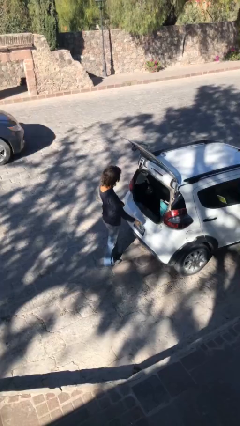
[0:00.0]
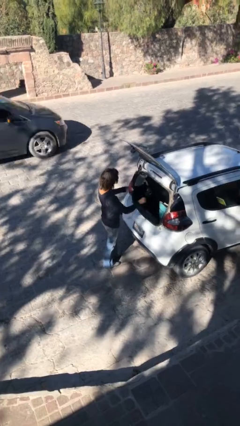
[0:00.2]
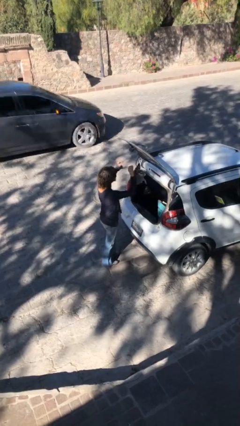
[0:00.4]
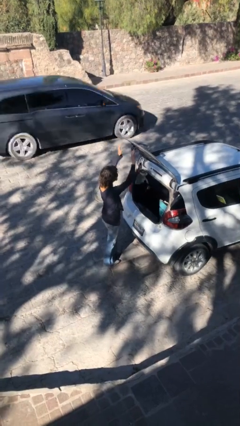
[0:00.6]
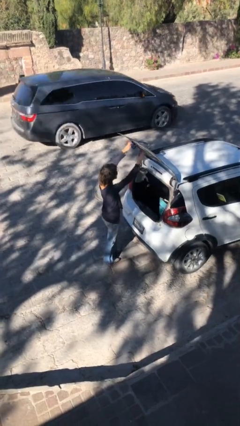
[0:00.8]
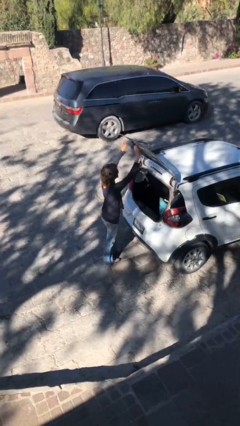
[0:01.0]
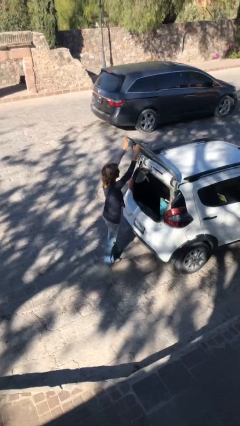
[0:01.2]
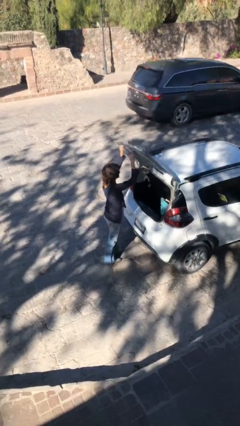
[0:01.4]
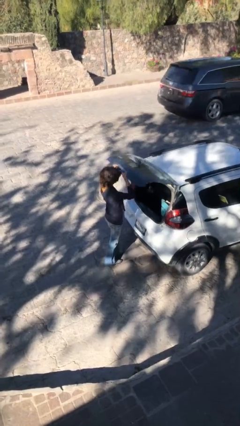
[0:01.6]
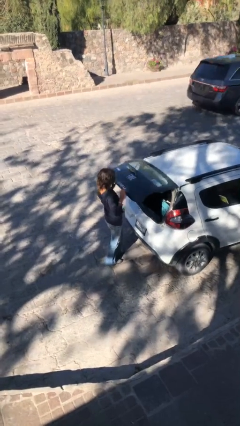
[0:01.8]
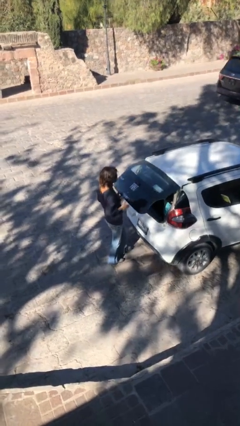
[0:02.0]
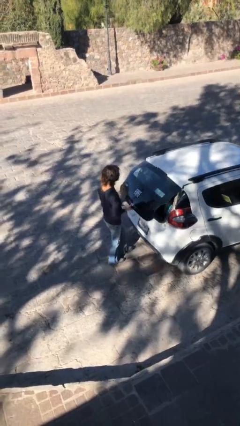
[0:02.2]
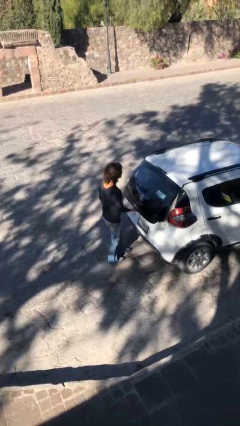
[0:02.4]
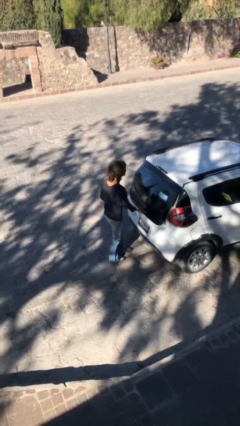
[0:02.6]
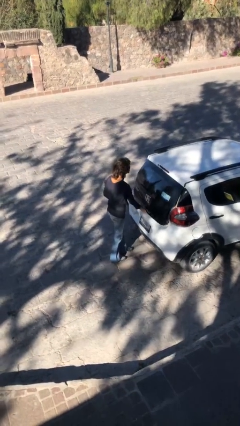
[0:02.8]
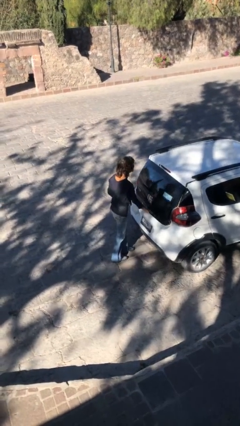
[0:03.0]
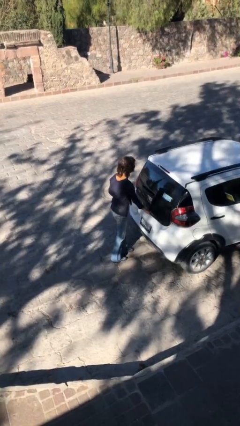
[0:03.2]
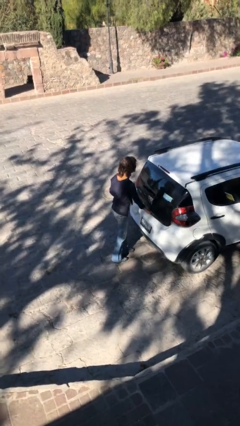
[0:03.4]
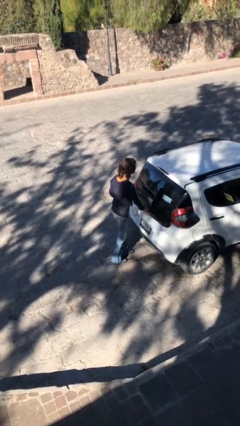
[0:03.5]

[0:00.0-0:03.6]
person closes car trunk

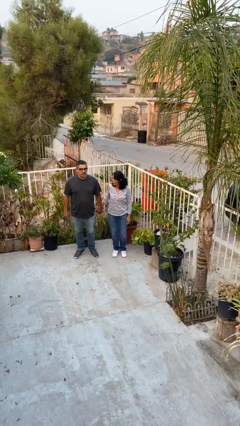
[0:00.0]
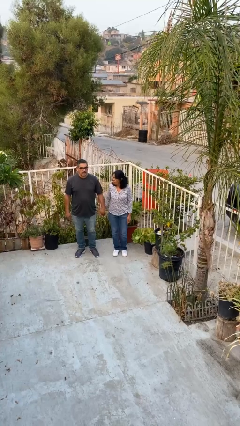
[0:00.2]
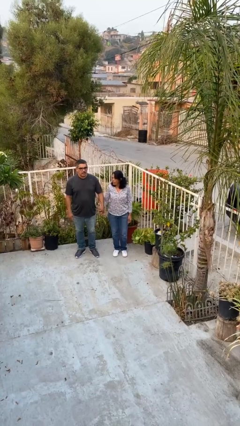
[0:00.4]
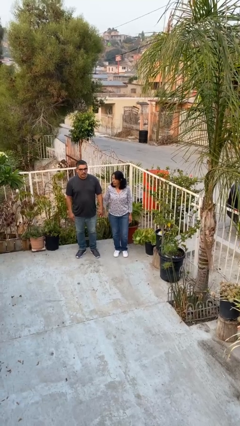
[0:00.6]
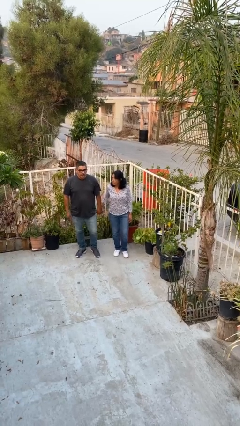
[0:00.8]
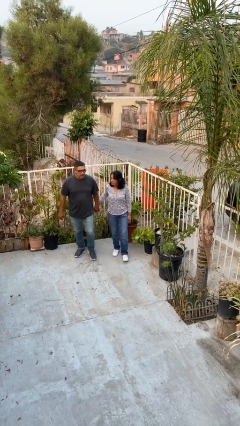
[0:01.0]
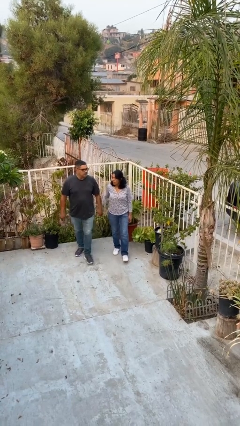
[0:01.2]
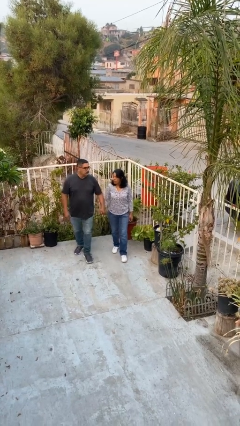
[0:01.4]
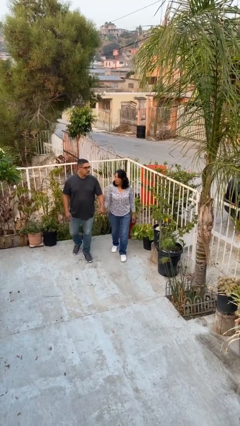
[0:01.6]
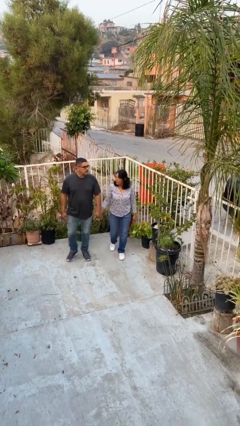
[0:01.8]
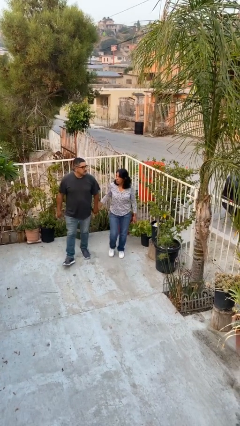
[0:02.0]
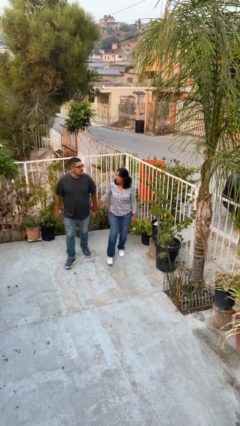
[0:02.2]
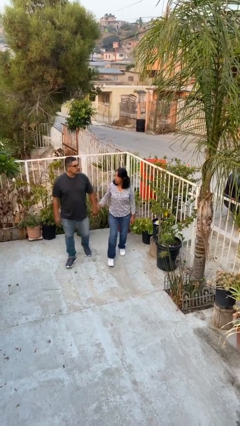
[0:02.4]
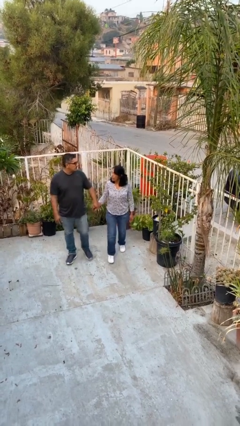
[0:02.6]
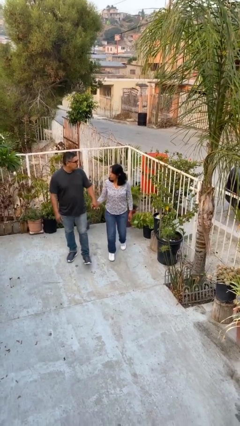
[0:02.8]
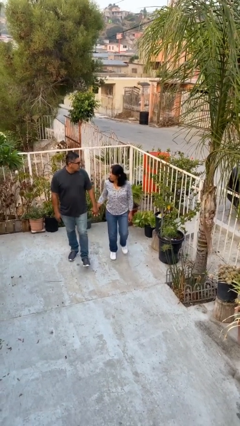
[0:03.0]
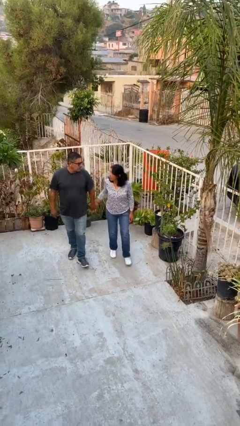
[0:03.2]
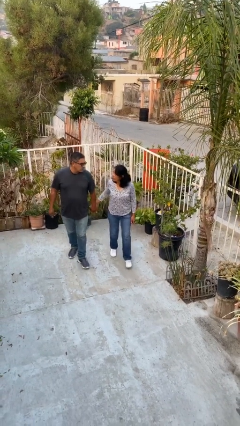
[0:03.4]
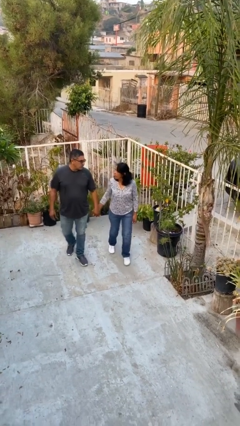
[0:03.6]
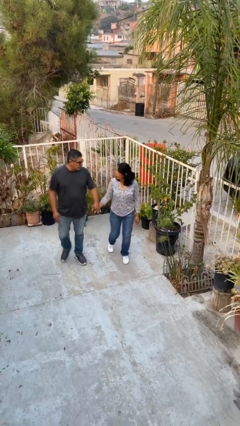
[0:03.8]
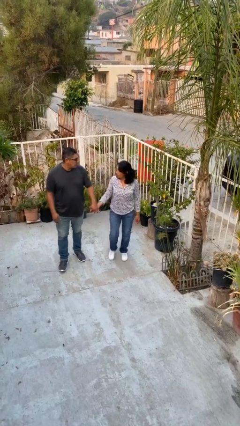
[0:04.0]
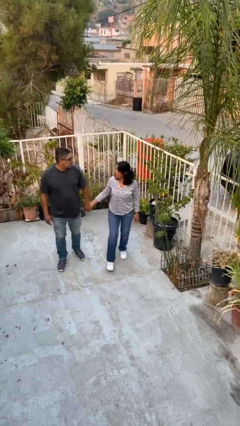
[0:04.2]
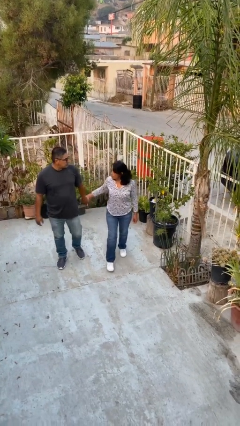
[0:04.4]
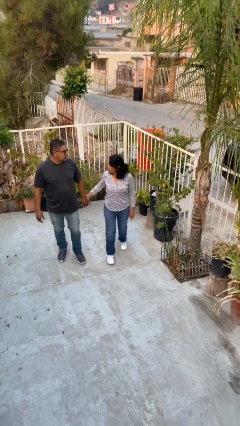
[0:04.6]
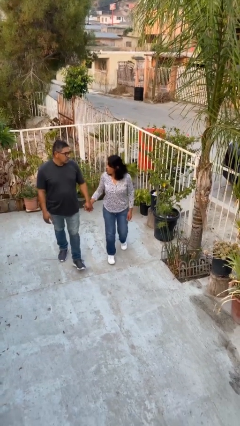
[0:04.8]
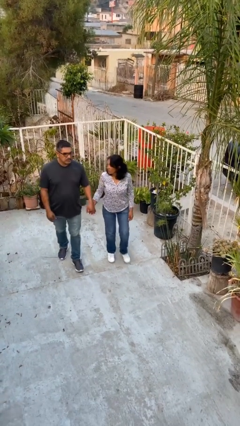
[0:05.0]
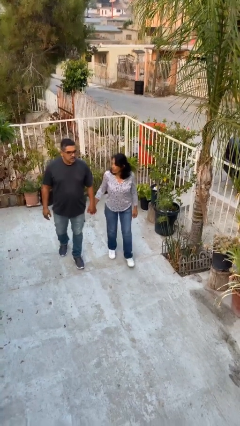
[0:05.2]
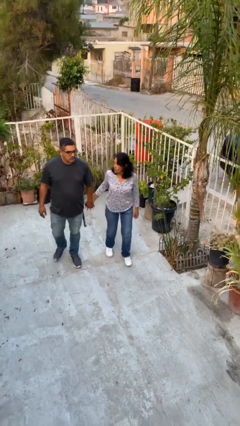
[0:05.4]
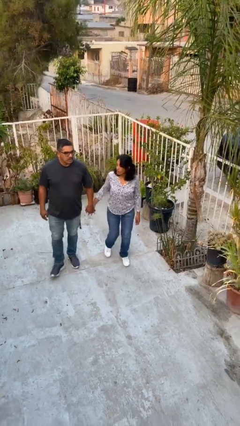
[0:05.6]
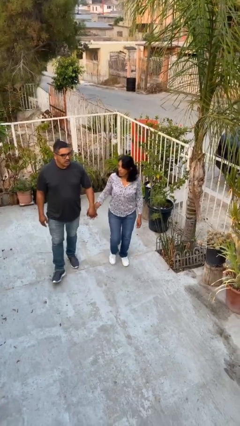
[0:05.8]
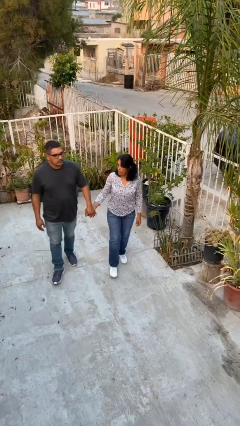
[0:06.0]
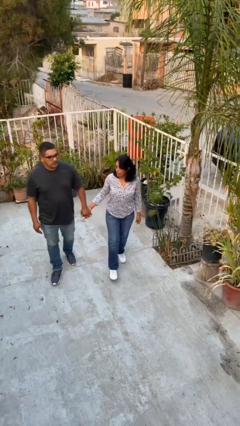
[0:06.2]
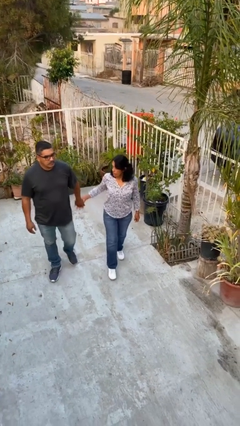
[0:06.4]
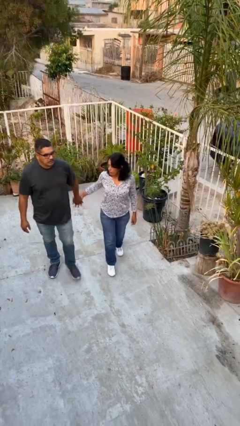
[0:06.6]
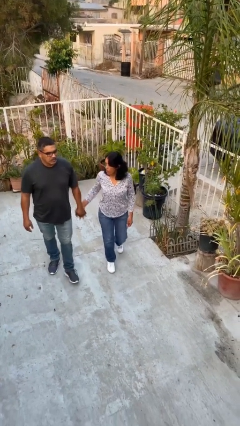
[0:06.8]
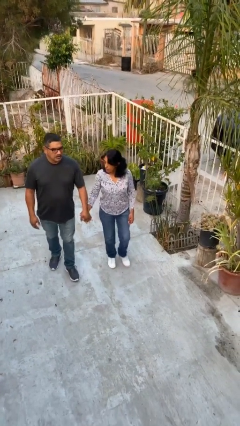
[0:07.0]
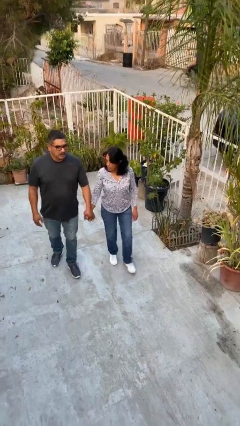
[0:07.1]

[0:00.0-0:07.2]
person holds hand

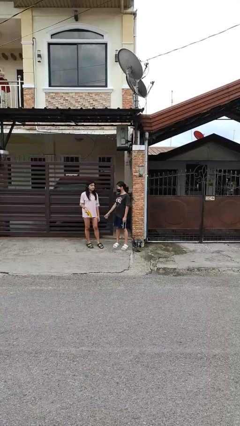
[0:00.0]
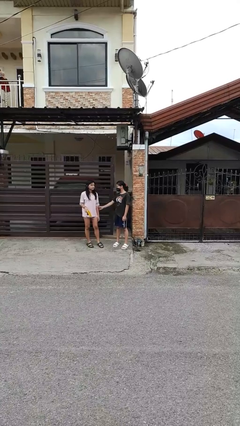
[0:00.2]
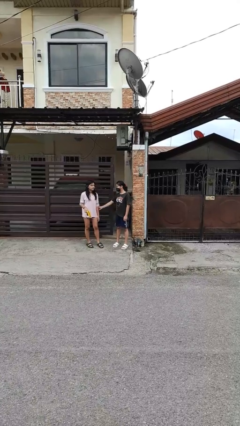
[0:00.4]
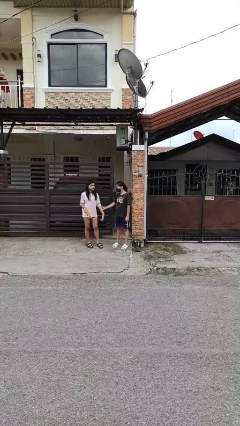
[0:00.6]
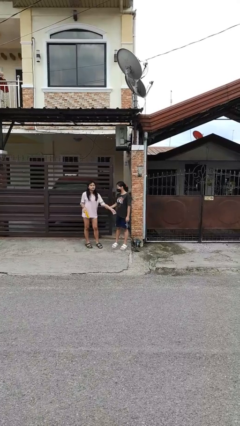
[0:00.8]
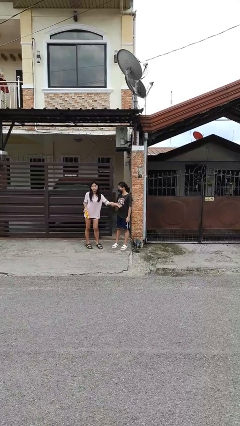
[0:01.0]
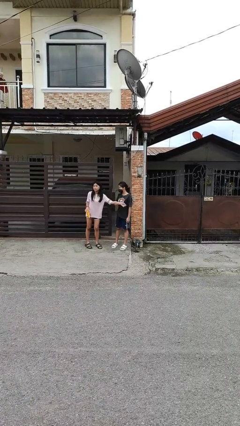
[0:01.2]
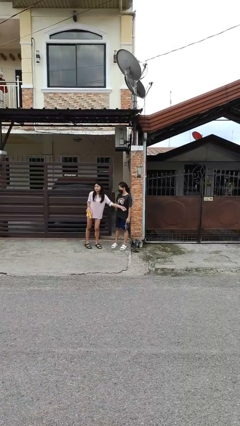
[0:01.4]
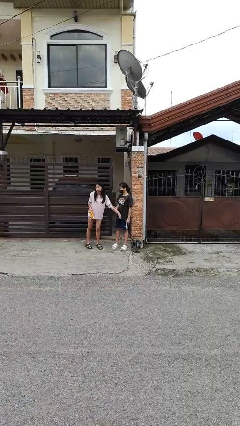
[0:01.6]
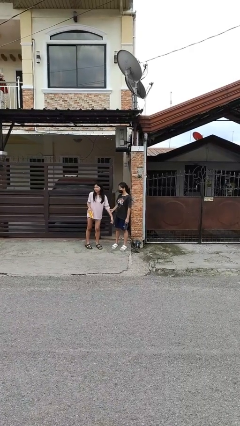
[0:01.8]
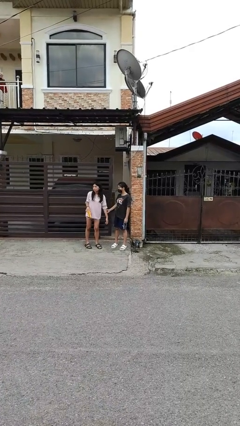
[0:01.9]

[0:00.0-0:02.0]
person grabs person by forearm

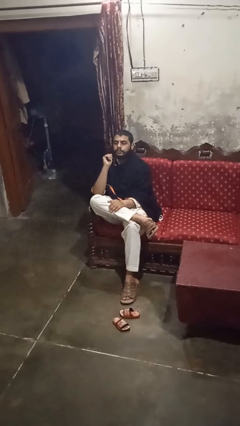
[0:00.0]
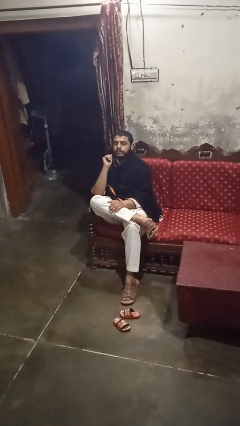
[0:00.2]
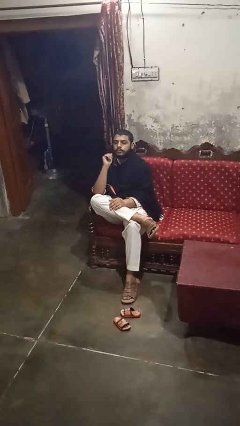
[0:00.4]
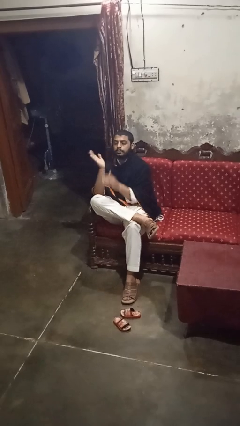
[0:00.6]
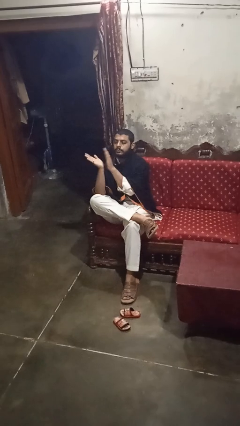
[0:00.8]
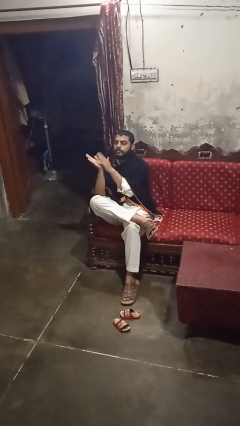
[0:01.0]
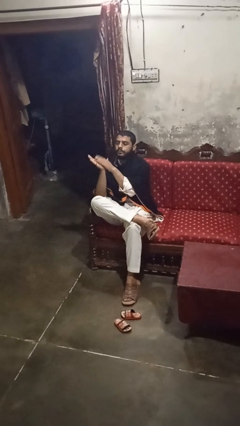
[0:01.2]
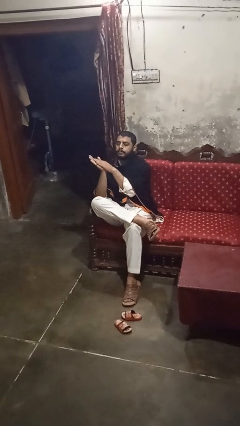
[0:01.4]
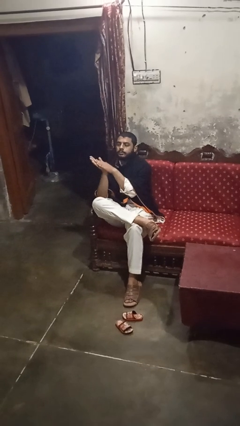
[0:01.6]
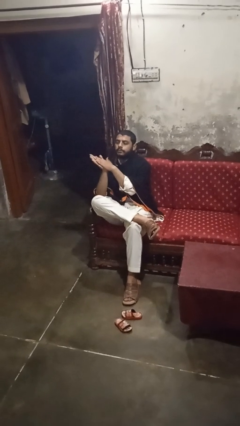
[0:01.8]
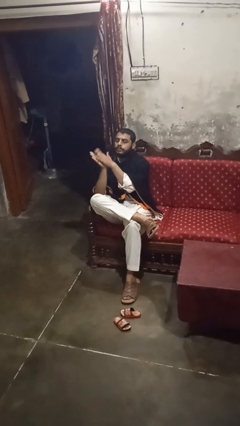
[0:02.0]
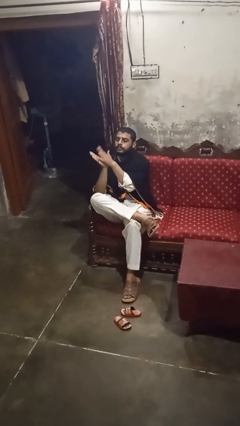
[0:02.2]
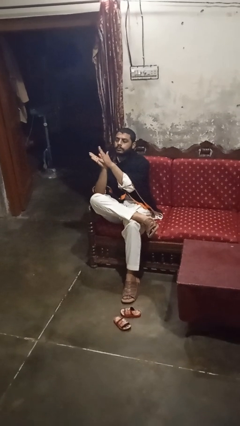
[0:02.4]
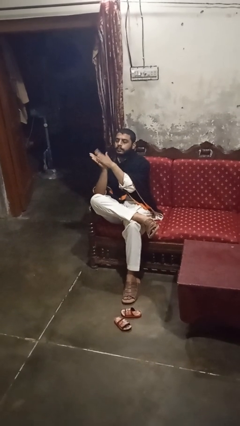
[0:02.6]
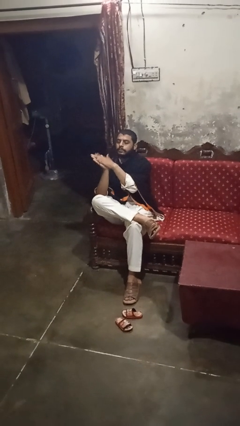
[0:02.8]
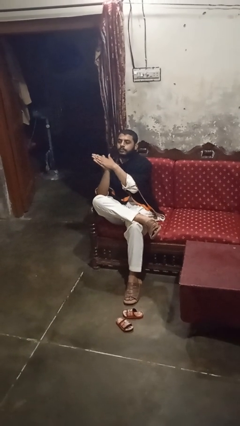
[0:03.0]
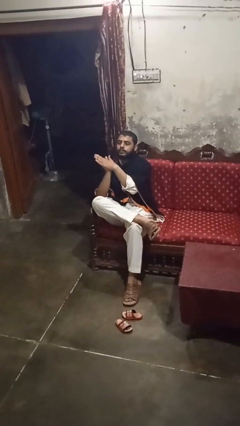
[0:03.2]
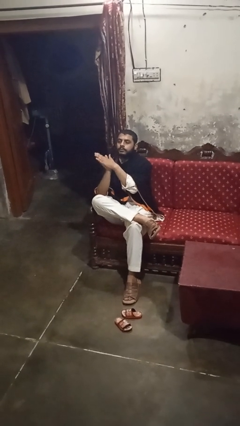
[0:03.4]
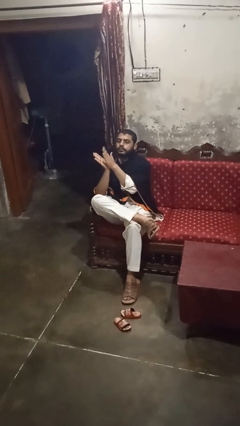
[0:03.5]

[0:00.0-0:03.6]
person claps hands

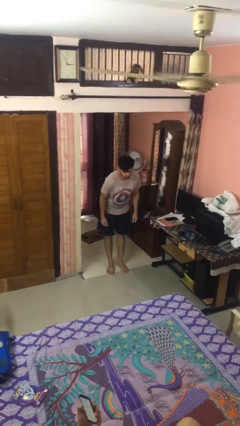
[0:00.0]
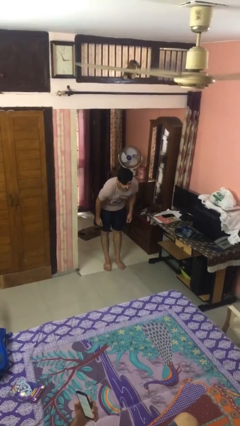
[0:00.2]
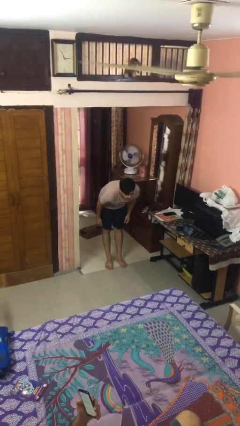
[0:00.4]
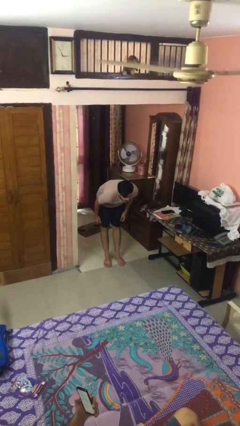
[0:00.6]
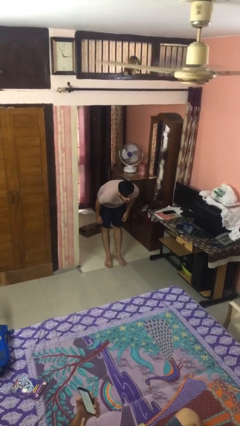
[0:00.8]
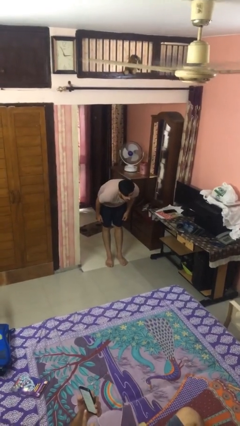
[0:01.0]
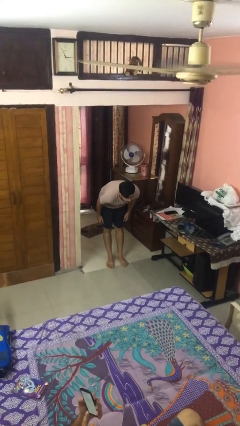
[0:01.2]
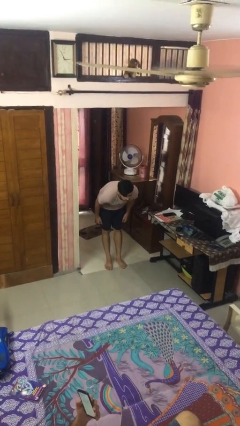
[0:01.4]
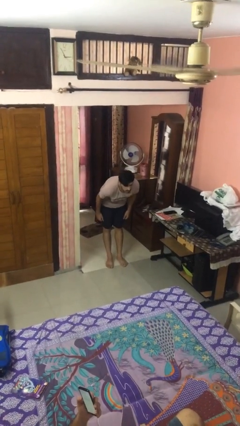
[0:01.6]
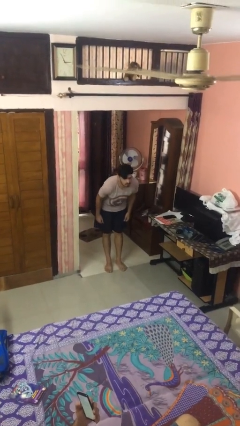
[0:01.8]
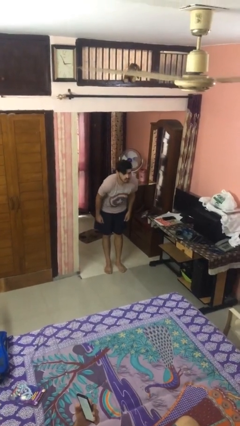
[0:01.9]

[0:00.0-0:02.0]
person bows
